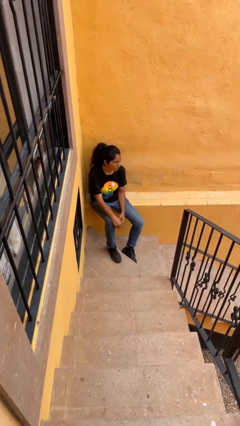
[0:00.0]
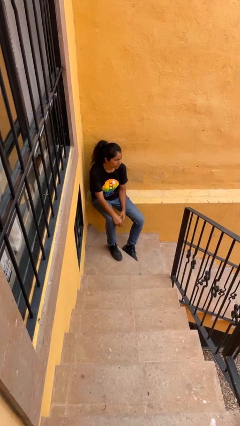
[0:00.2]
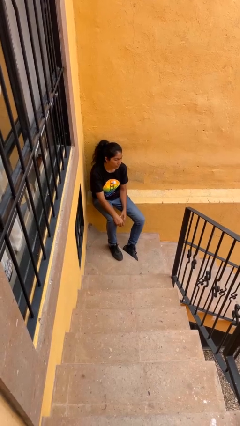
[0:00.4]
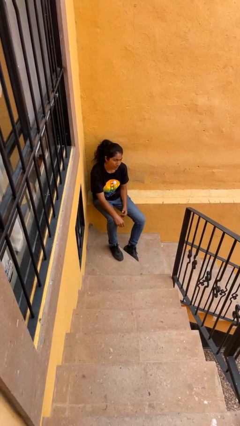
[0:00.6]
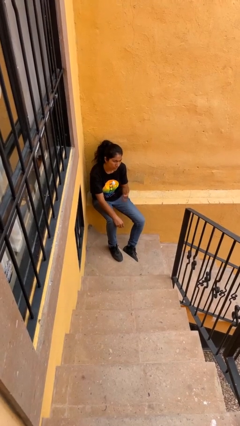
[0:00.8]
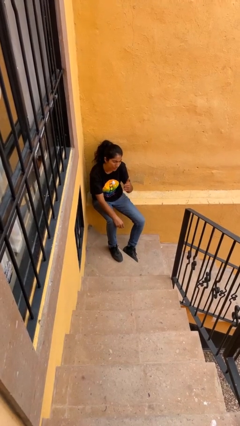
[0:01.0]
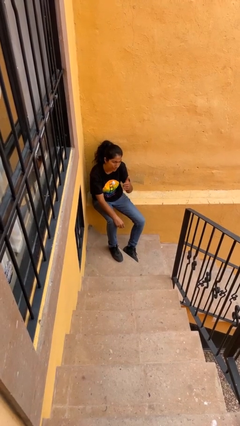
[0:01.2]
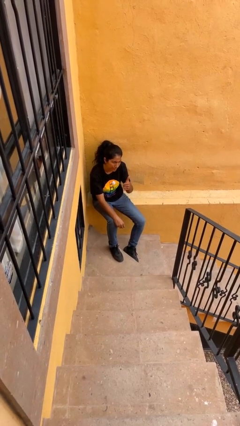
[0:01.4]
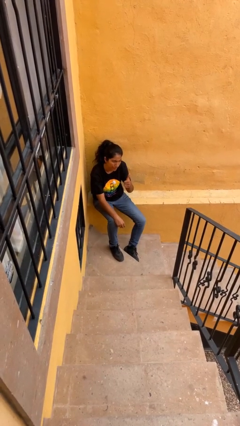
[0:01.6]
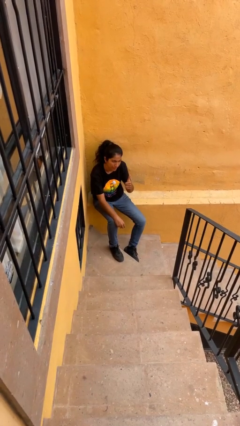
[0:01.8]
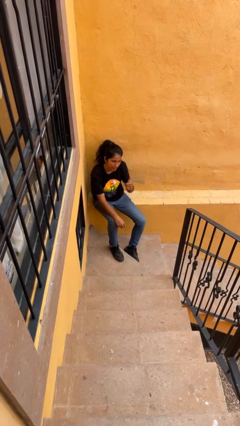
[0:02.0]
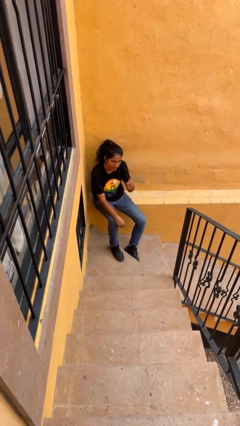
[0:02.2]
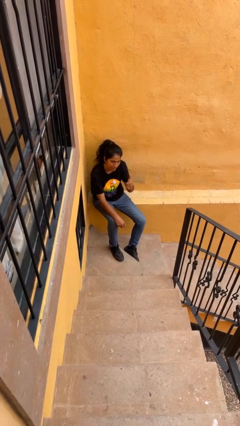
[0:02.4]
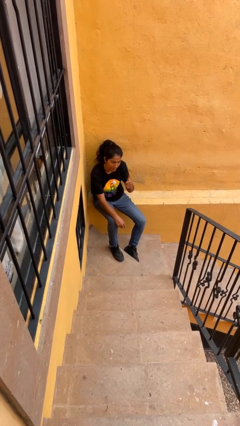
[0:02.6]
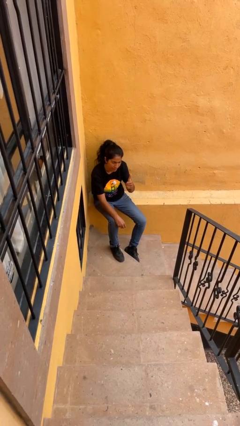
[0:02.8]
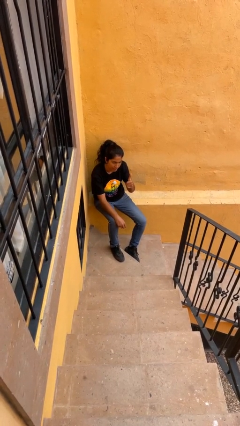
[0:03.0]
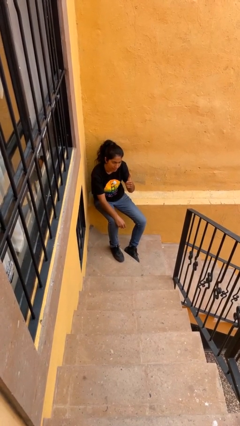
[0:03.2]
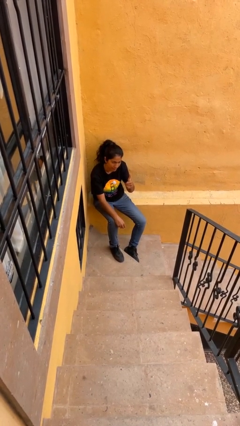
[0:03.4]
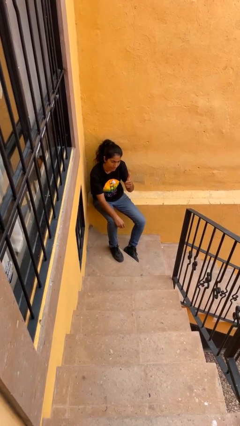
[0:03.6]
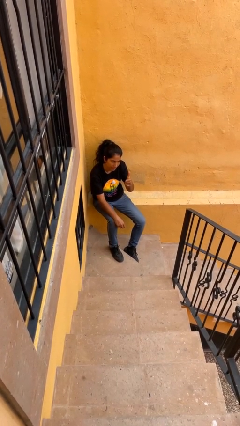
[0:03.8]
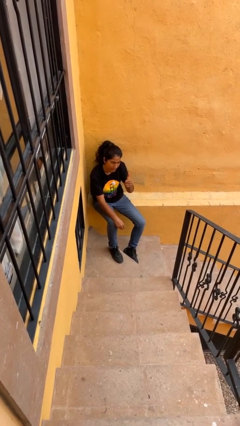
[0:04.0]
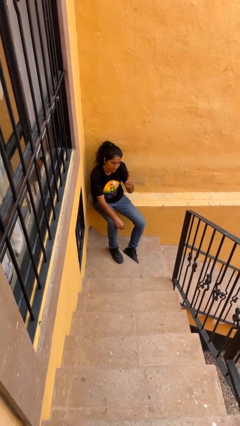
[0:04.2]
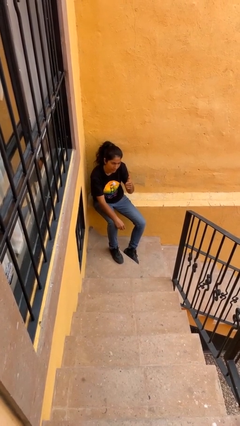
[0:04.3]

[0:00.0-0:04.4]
person gestures thumbs up

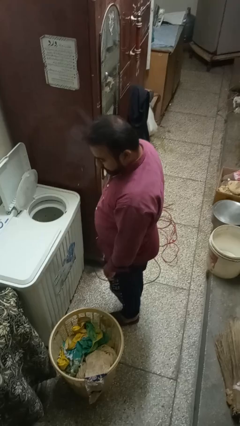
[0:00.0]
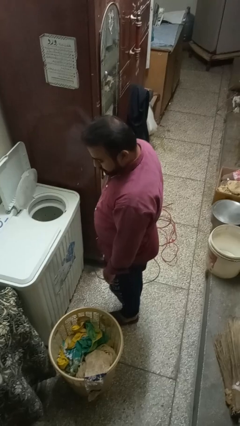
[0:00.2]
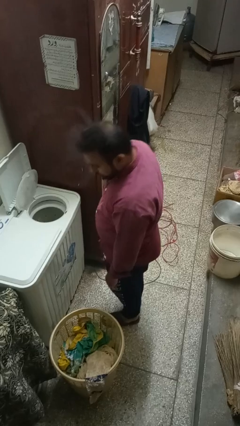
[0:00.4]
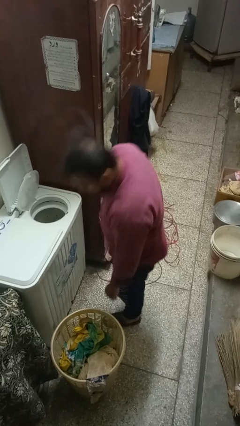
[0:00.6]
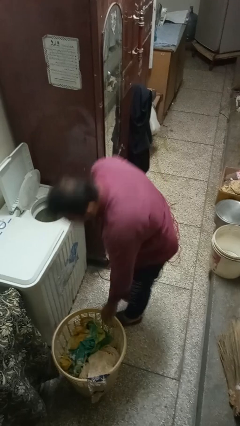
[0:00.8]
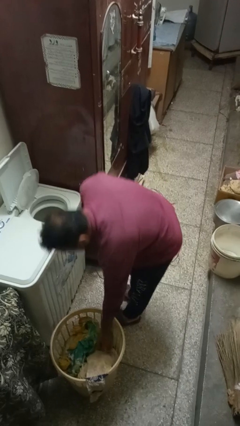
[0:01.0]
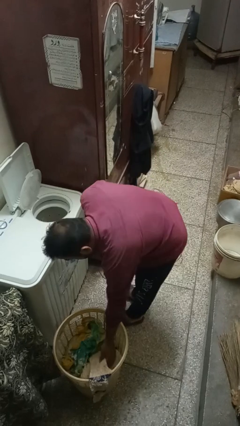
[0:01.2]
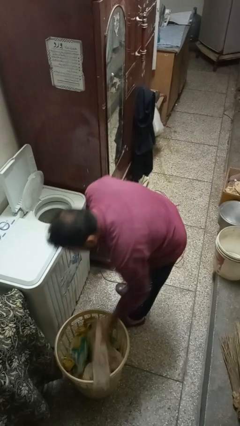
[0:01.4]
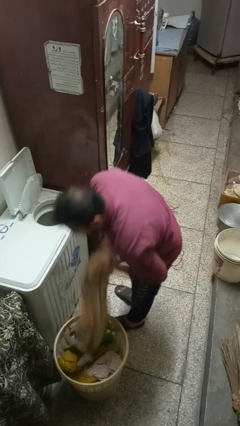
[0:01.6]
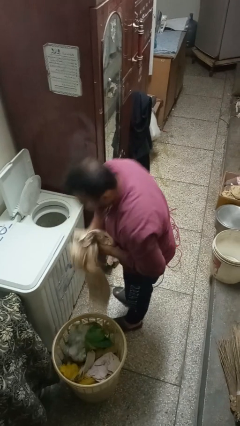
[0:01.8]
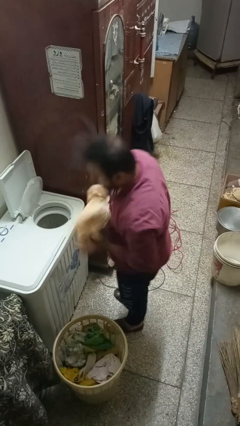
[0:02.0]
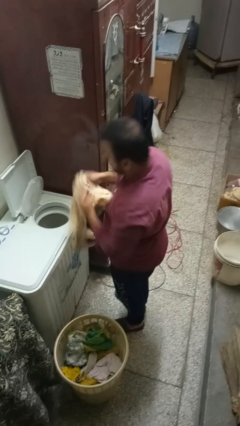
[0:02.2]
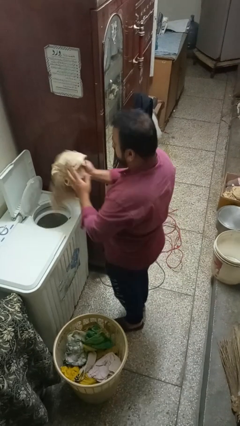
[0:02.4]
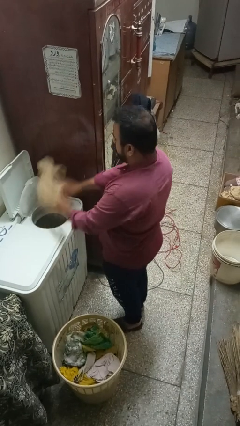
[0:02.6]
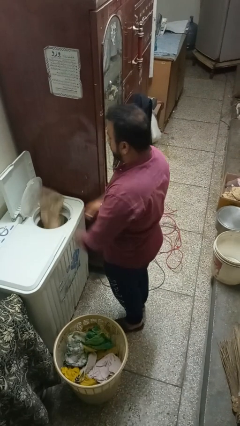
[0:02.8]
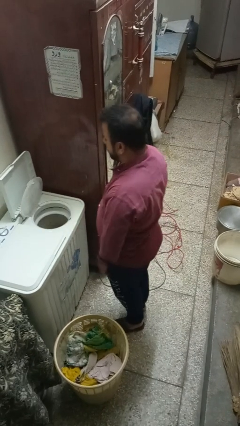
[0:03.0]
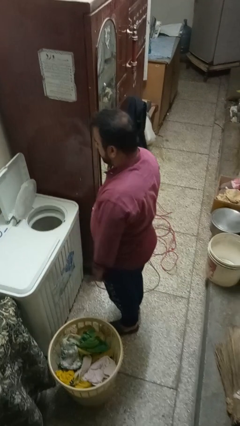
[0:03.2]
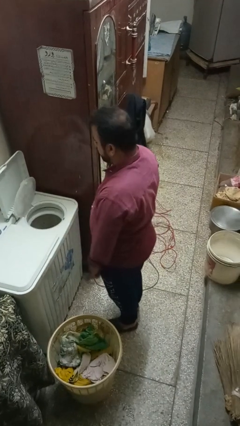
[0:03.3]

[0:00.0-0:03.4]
person loads dryer

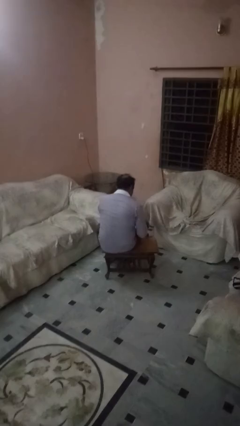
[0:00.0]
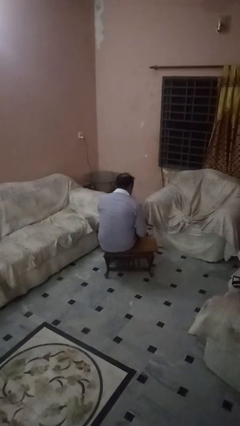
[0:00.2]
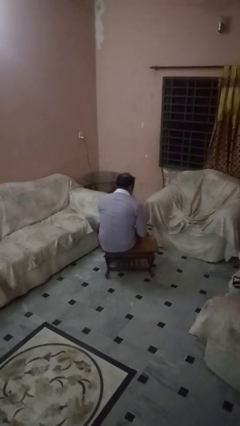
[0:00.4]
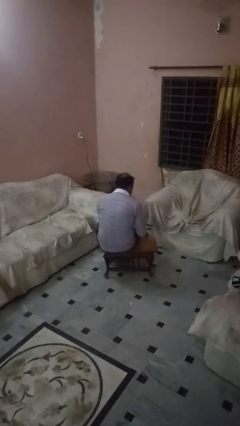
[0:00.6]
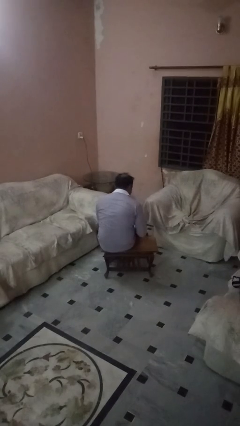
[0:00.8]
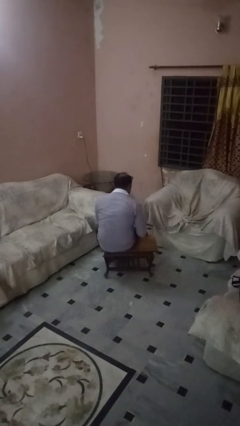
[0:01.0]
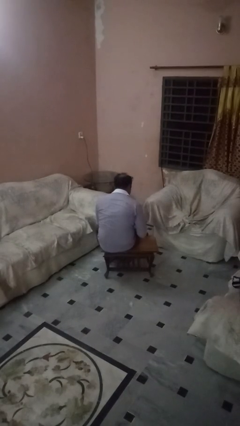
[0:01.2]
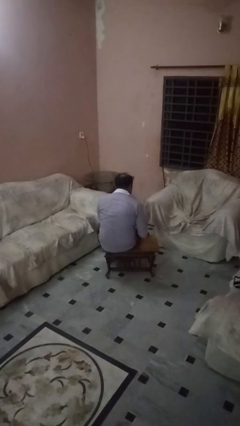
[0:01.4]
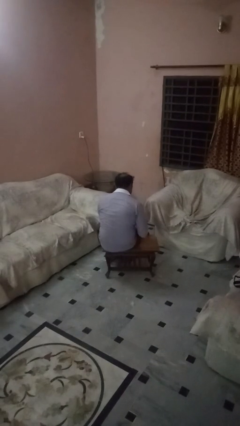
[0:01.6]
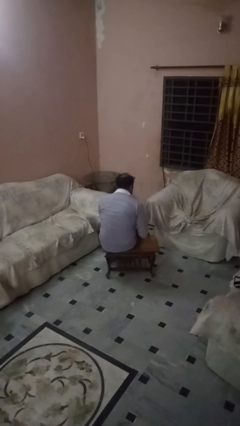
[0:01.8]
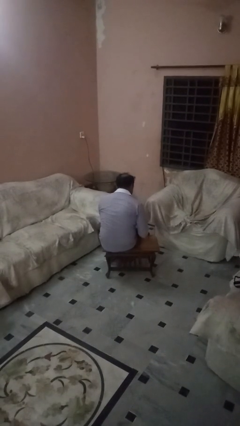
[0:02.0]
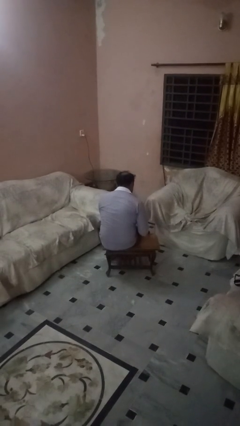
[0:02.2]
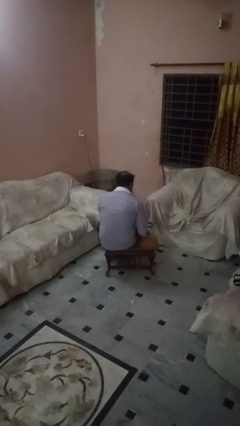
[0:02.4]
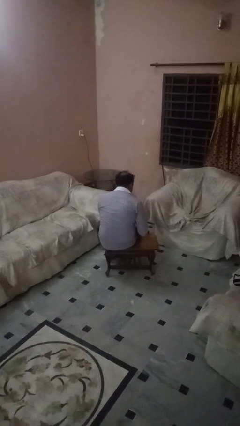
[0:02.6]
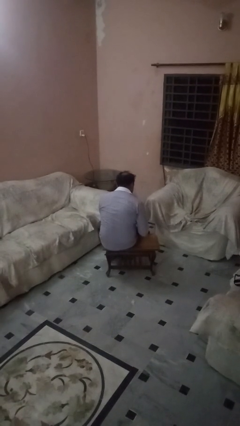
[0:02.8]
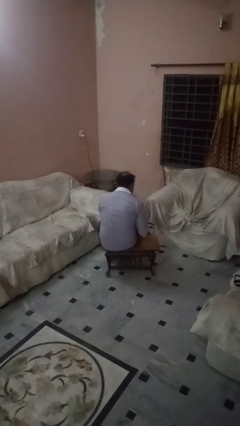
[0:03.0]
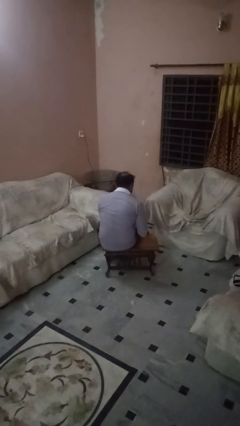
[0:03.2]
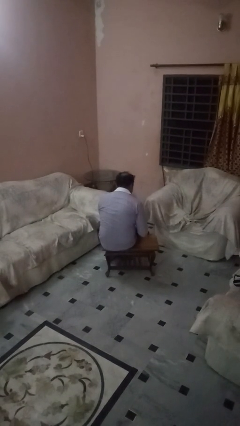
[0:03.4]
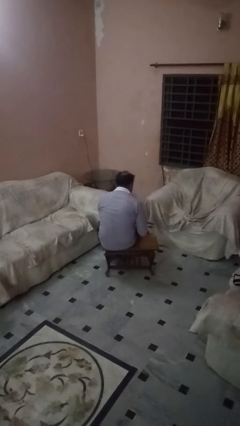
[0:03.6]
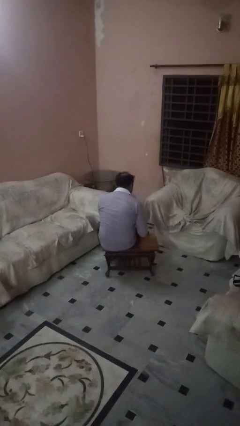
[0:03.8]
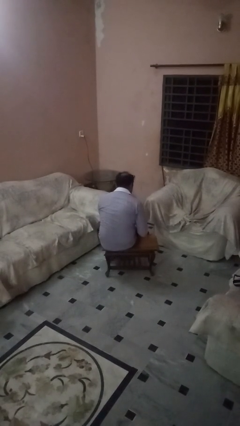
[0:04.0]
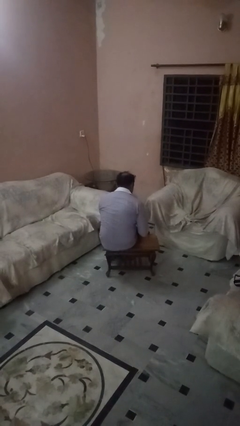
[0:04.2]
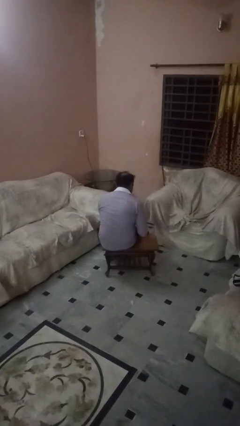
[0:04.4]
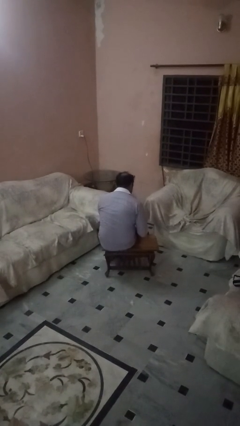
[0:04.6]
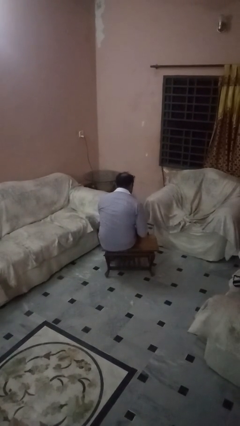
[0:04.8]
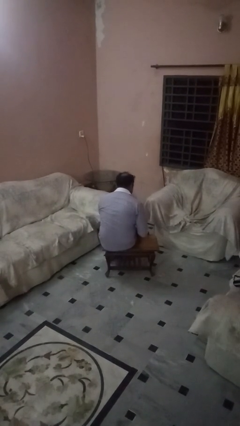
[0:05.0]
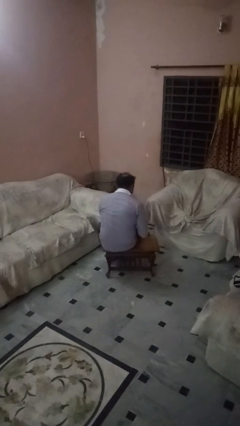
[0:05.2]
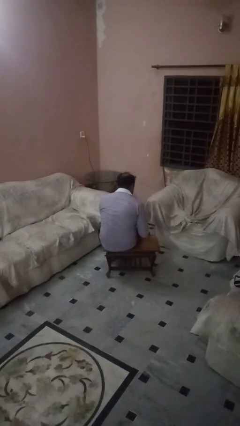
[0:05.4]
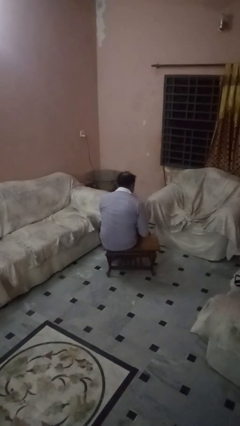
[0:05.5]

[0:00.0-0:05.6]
person paints fingernails

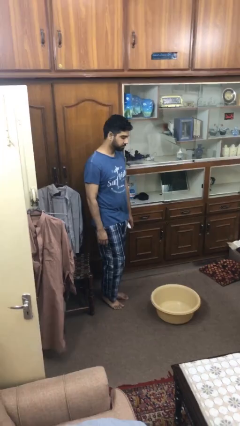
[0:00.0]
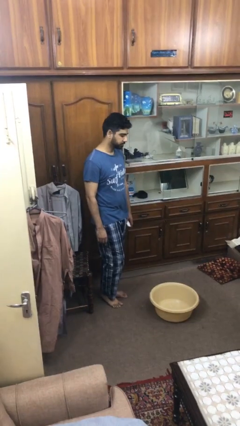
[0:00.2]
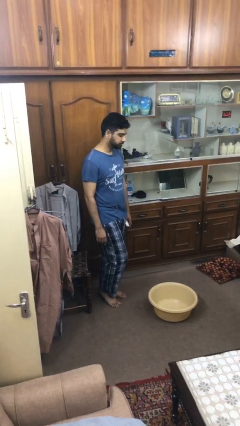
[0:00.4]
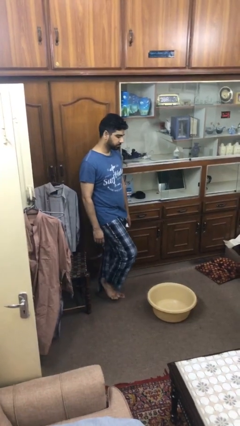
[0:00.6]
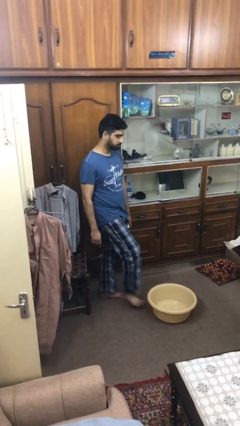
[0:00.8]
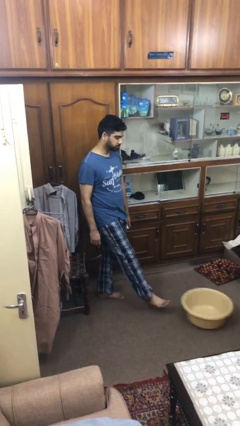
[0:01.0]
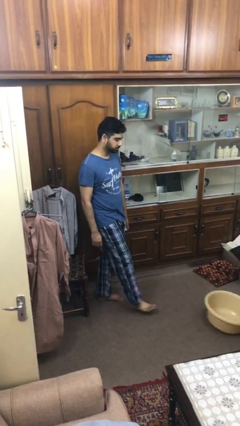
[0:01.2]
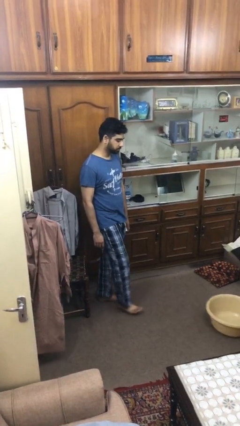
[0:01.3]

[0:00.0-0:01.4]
person kicks object to person

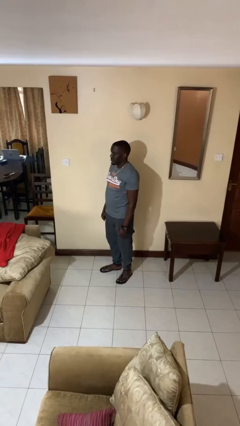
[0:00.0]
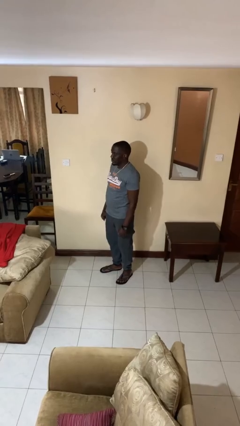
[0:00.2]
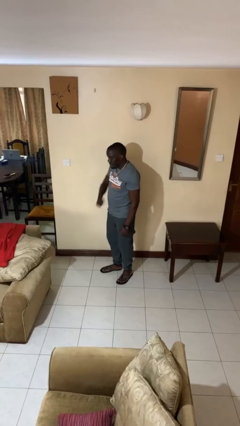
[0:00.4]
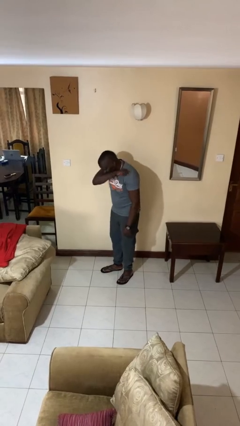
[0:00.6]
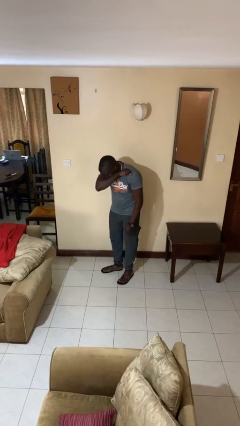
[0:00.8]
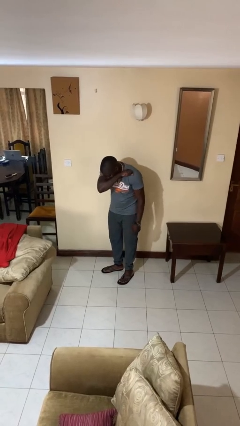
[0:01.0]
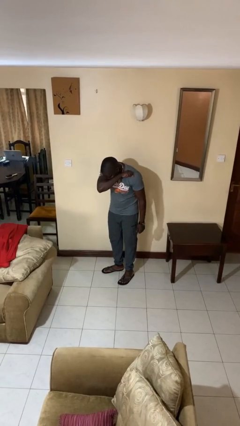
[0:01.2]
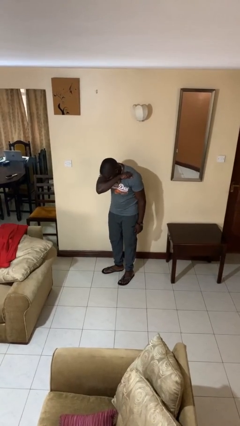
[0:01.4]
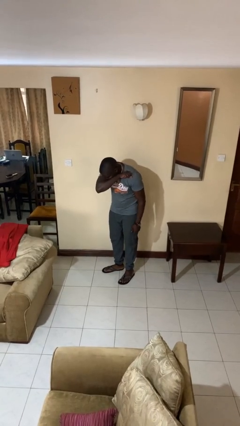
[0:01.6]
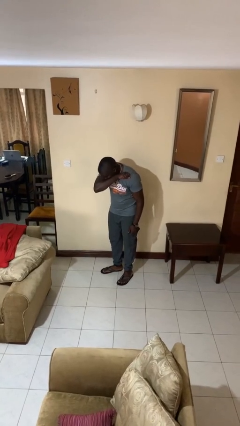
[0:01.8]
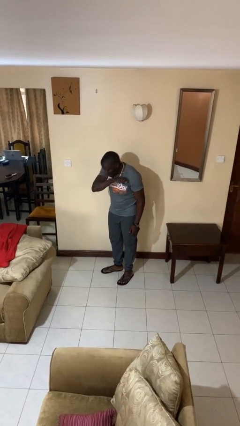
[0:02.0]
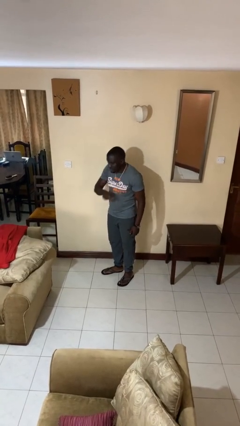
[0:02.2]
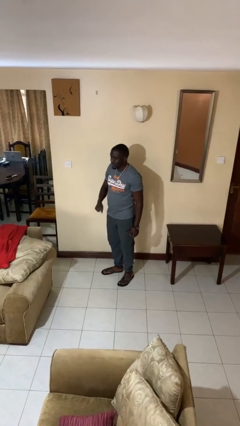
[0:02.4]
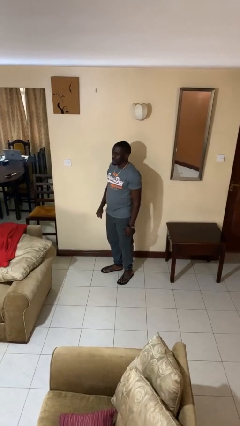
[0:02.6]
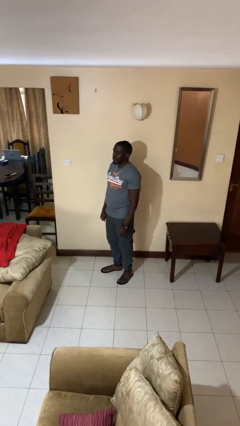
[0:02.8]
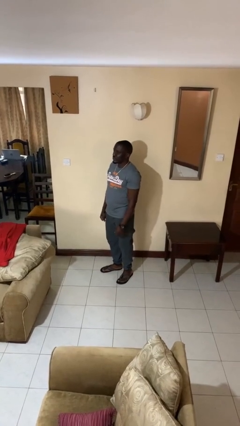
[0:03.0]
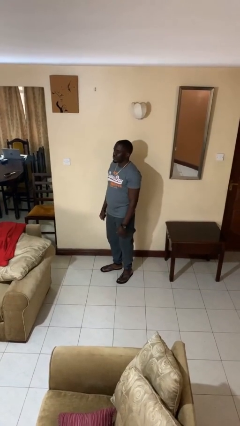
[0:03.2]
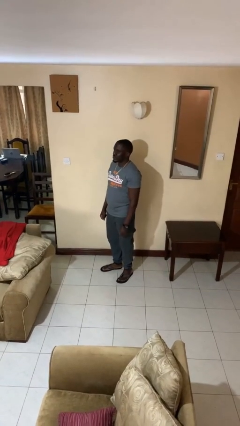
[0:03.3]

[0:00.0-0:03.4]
person sneezes into arm
